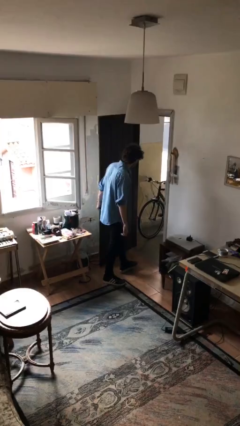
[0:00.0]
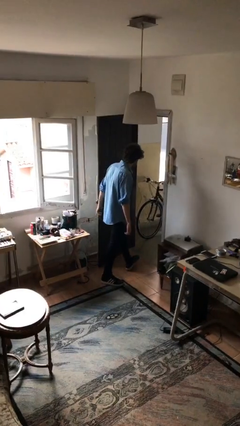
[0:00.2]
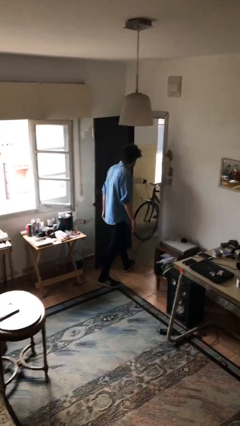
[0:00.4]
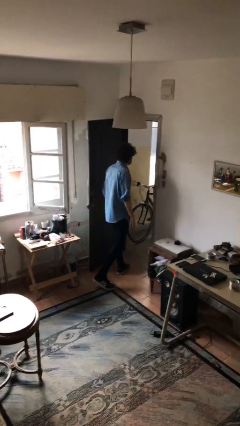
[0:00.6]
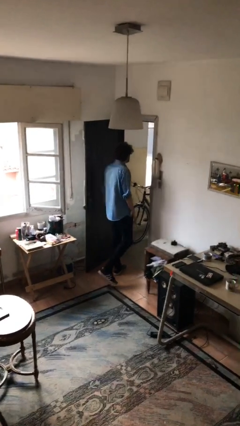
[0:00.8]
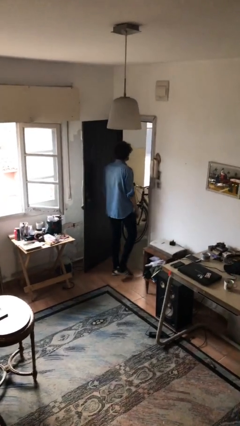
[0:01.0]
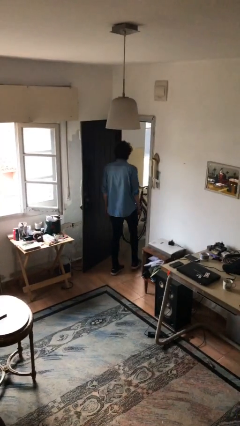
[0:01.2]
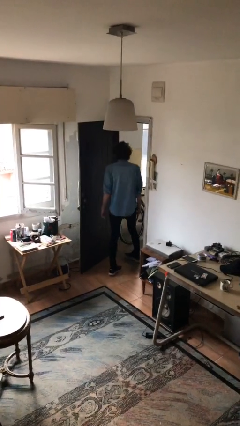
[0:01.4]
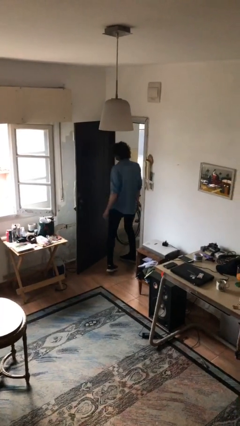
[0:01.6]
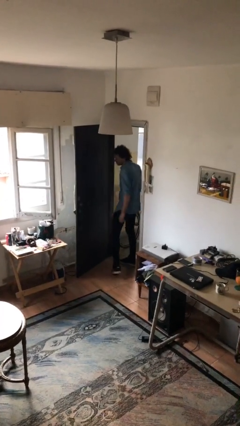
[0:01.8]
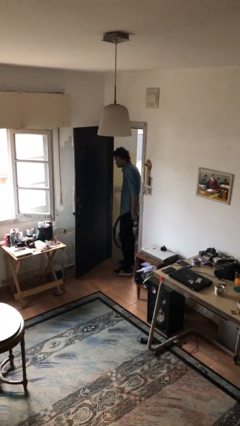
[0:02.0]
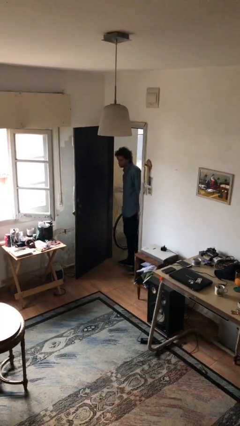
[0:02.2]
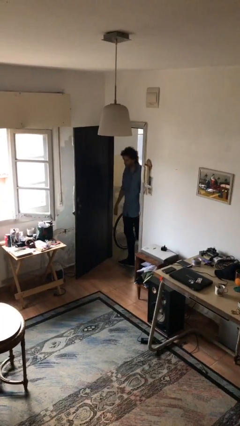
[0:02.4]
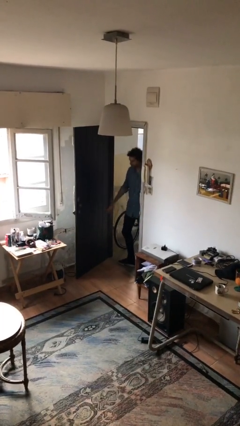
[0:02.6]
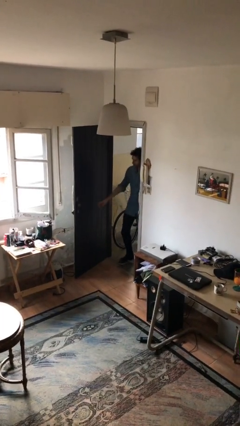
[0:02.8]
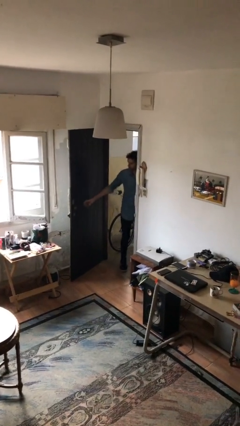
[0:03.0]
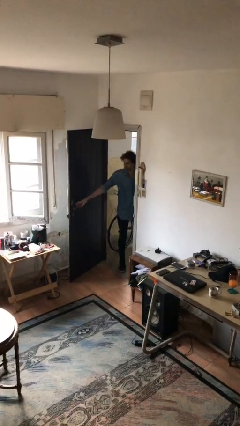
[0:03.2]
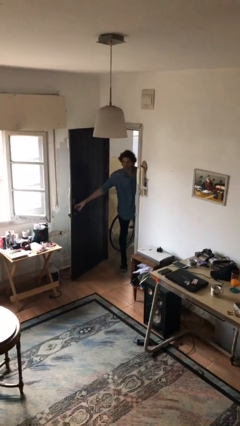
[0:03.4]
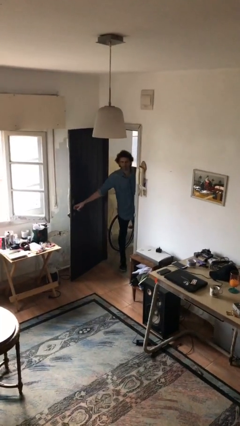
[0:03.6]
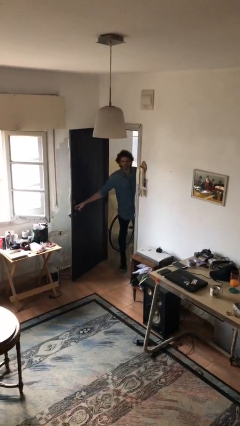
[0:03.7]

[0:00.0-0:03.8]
person exits scene through structure

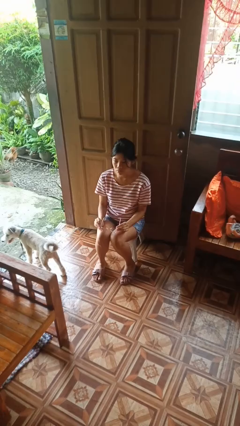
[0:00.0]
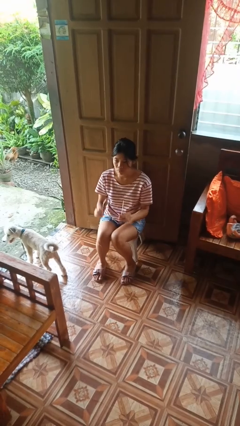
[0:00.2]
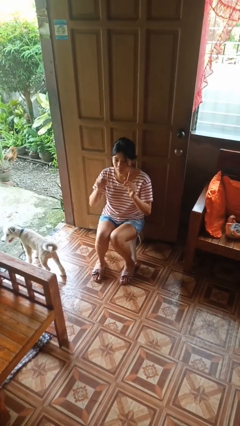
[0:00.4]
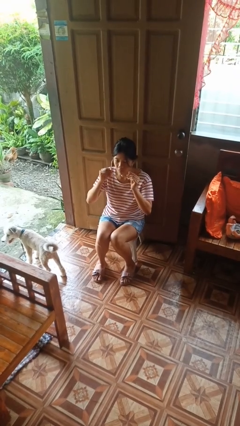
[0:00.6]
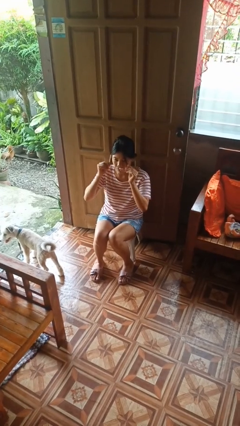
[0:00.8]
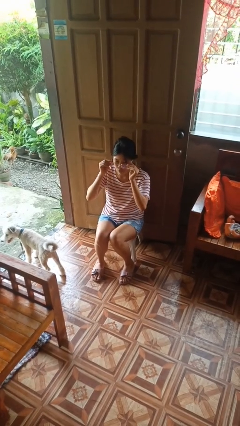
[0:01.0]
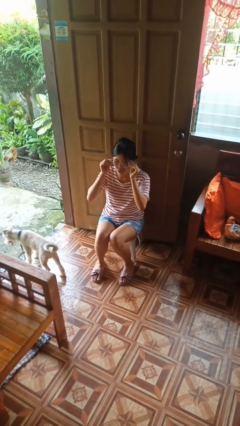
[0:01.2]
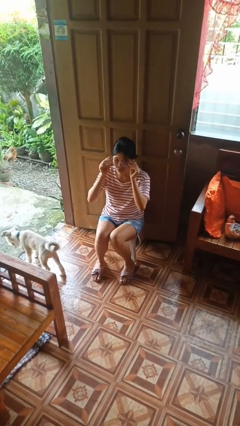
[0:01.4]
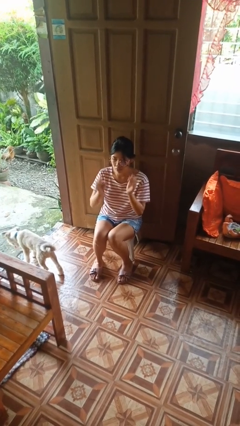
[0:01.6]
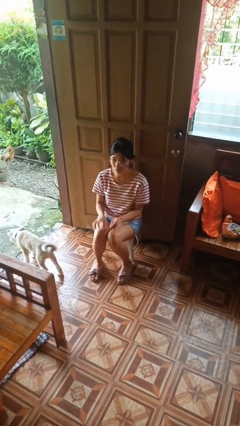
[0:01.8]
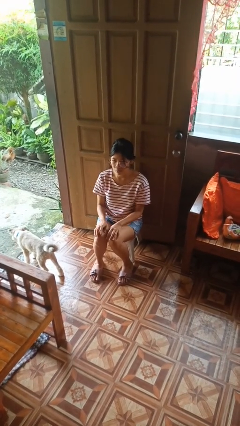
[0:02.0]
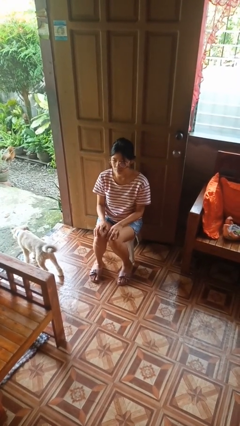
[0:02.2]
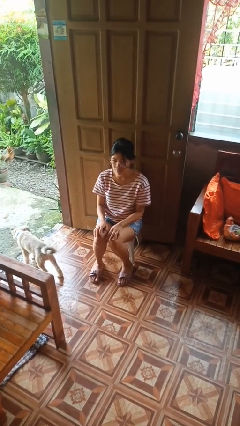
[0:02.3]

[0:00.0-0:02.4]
person puts on glasses

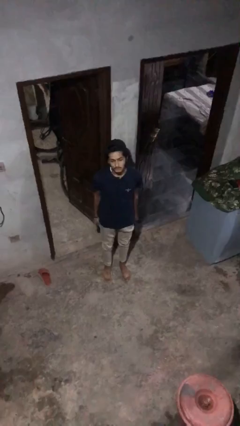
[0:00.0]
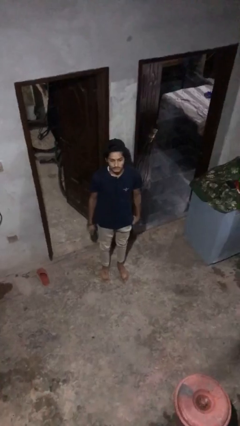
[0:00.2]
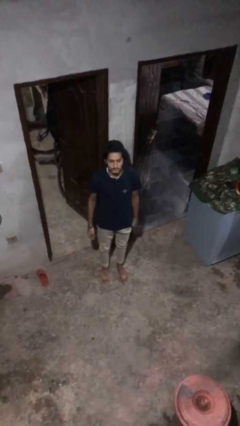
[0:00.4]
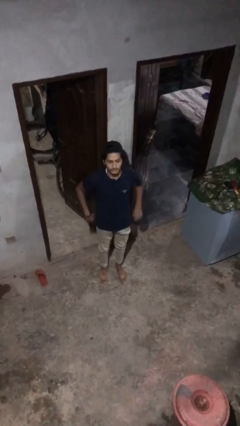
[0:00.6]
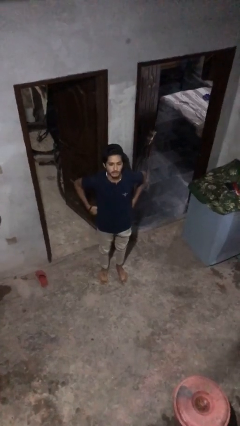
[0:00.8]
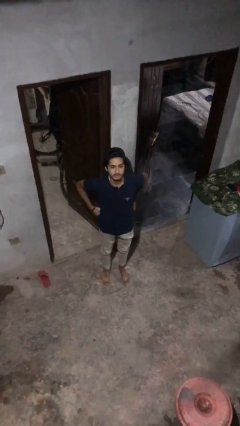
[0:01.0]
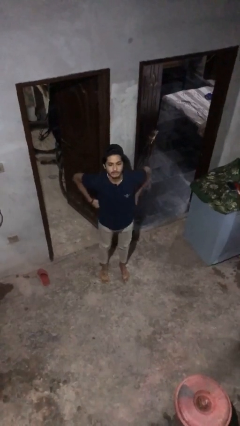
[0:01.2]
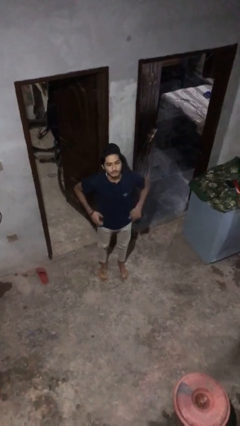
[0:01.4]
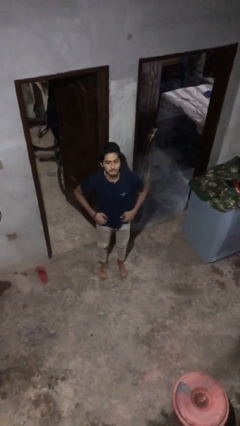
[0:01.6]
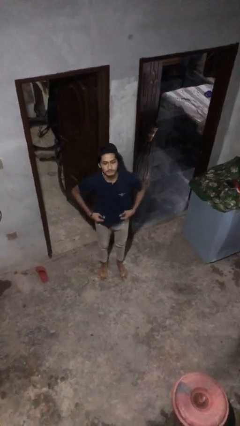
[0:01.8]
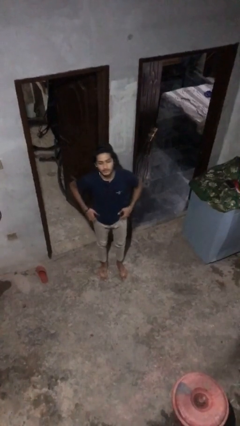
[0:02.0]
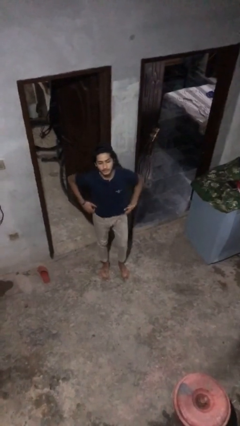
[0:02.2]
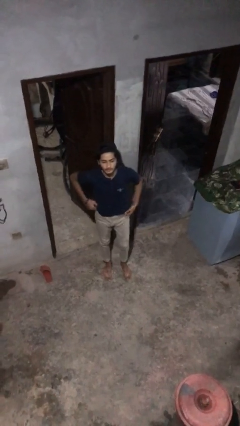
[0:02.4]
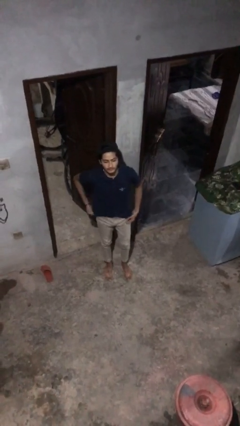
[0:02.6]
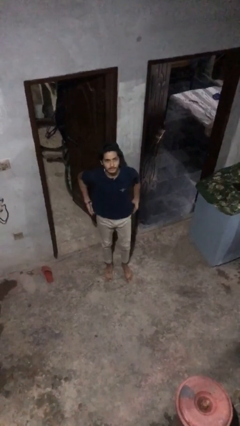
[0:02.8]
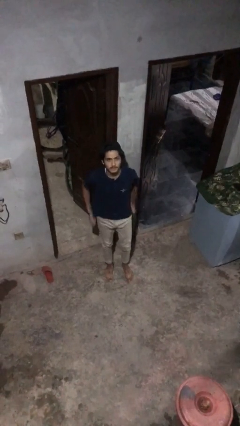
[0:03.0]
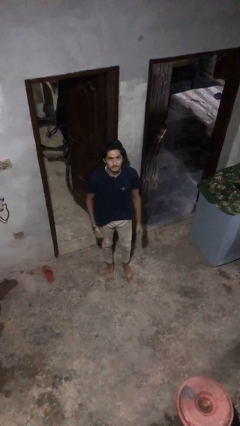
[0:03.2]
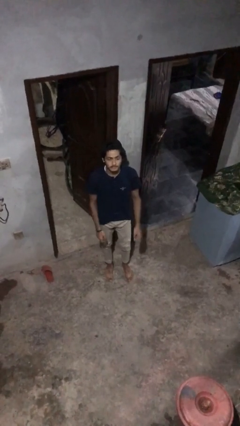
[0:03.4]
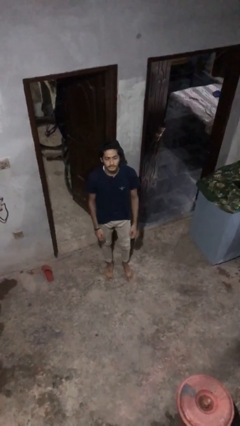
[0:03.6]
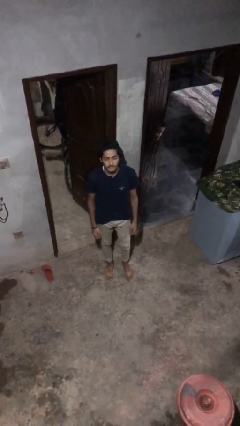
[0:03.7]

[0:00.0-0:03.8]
person hikes up pants

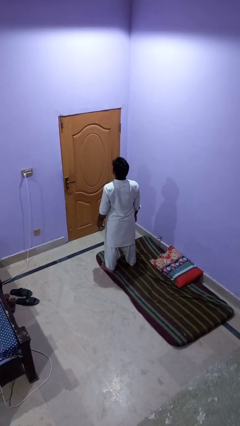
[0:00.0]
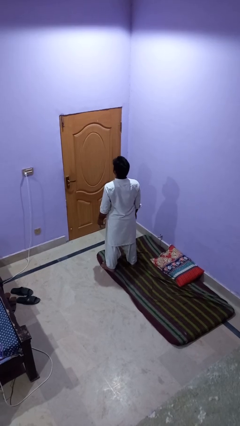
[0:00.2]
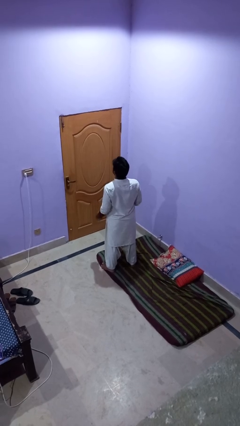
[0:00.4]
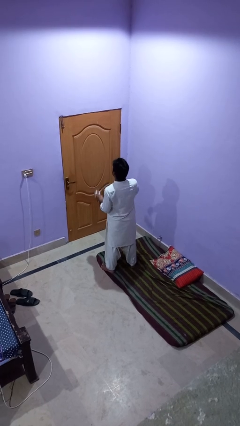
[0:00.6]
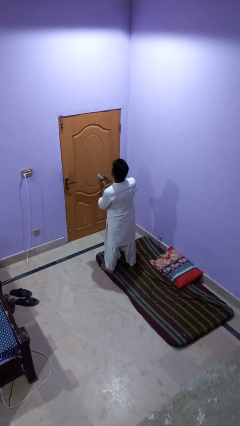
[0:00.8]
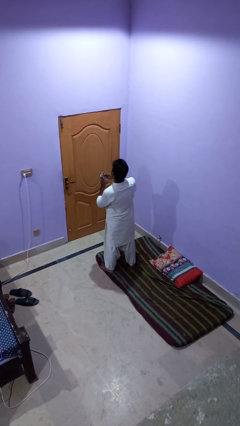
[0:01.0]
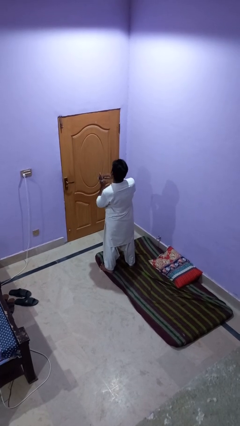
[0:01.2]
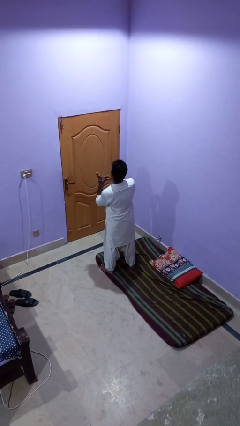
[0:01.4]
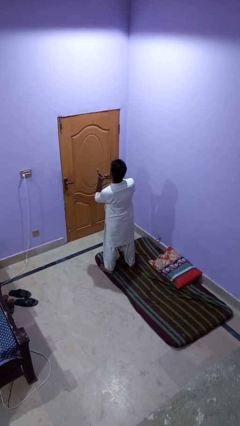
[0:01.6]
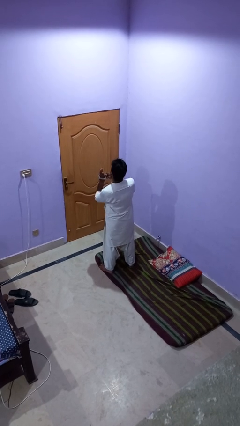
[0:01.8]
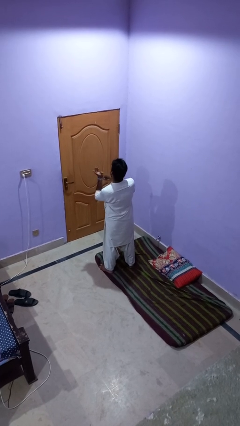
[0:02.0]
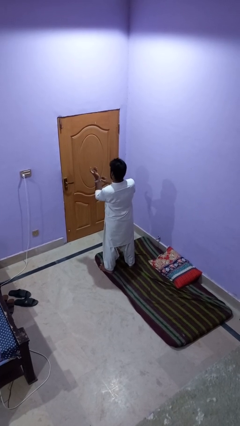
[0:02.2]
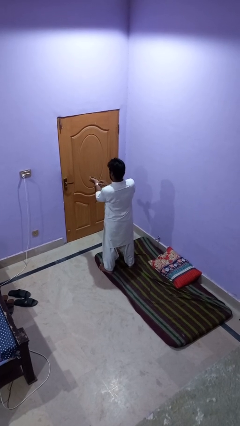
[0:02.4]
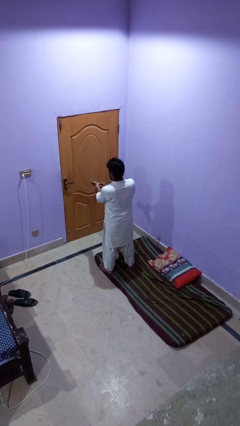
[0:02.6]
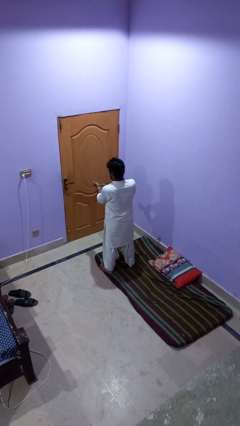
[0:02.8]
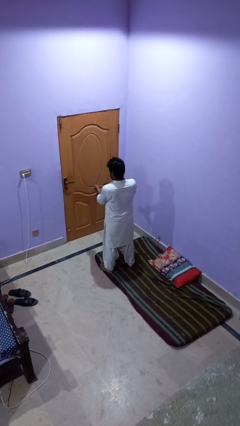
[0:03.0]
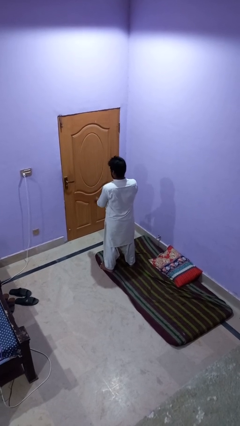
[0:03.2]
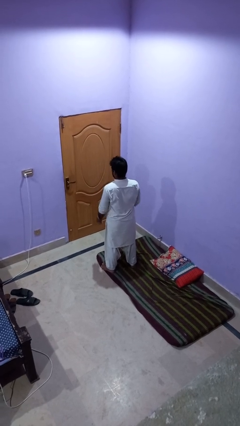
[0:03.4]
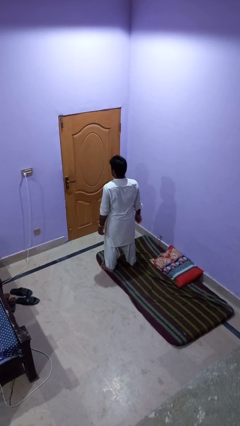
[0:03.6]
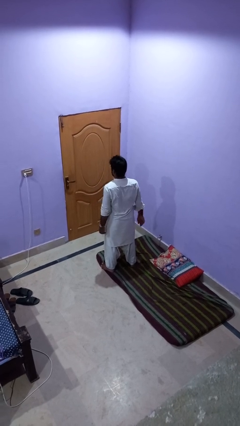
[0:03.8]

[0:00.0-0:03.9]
person puts on wristwatch

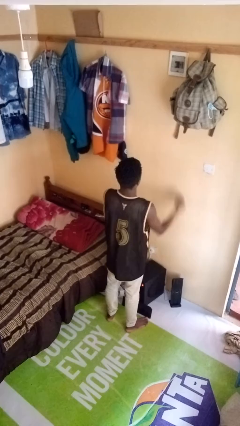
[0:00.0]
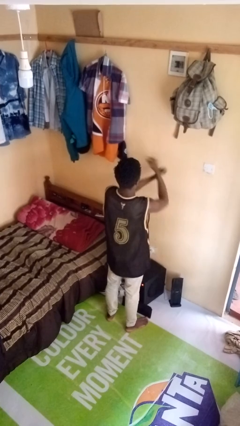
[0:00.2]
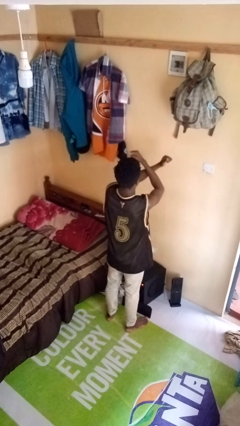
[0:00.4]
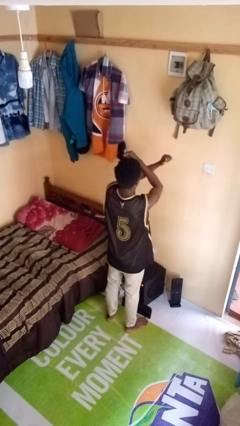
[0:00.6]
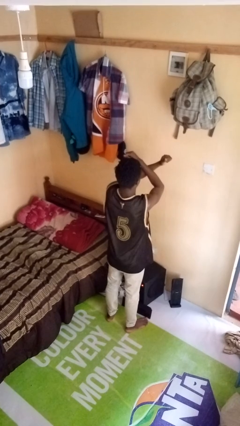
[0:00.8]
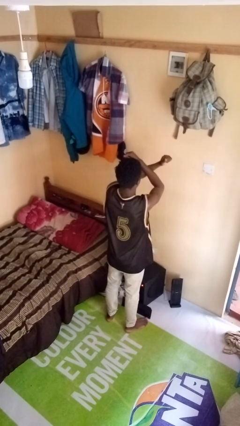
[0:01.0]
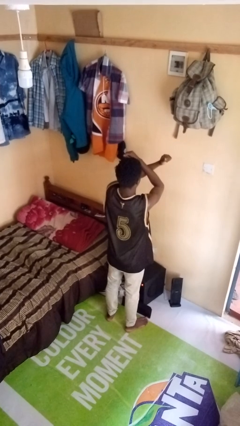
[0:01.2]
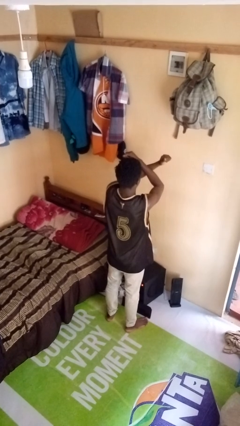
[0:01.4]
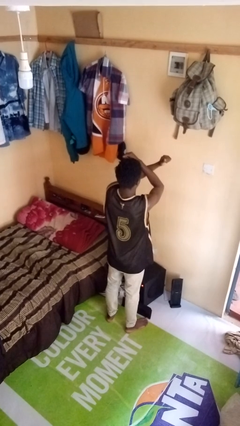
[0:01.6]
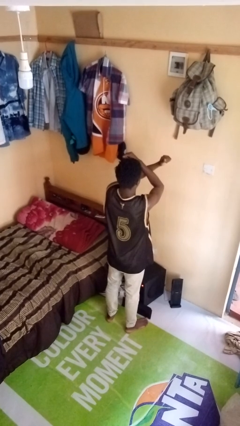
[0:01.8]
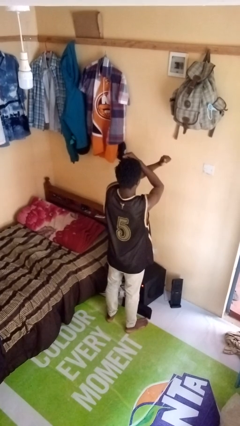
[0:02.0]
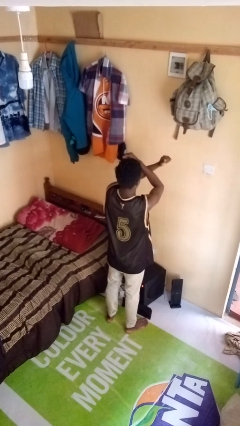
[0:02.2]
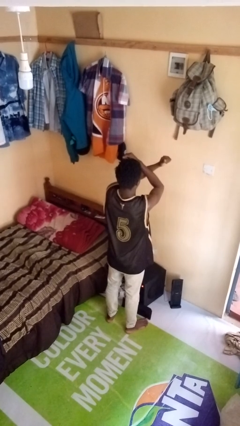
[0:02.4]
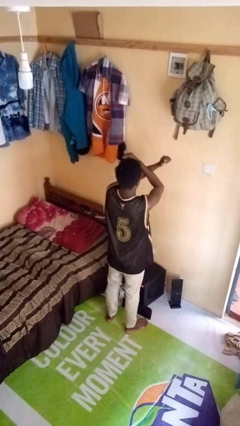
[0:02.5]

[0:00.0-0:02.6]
person gestures arms x

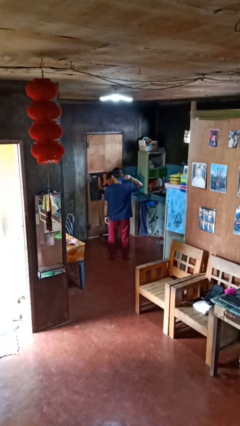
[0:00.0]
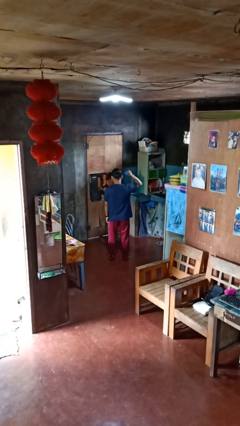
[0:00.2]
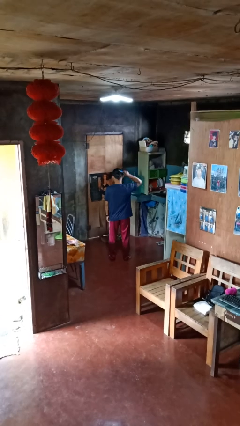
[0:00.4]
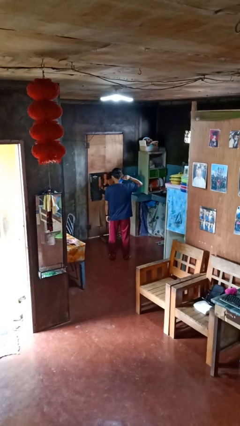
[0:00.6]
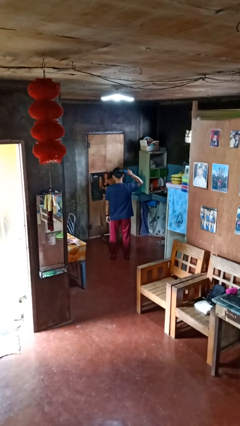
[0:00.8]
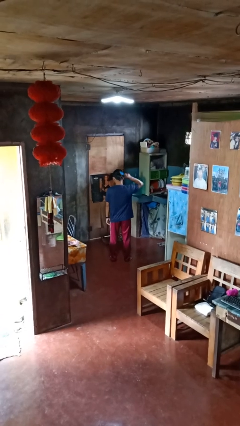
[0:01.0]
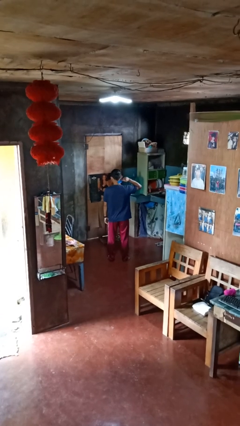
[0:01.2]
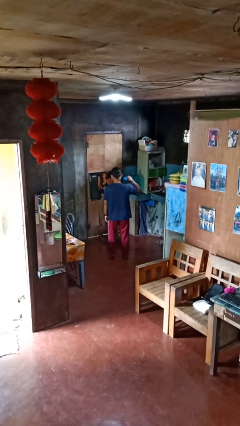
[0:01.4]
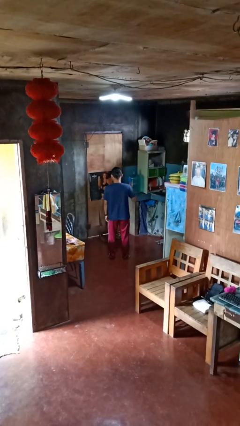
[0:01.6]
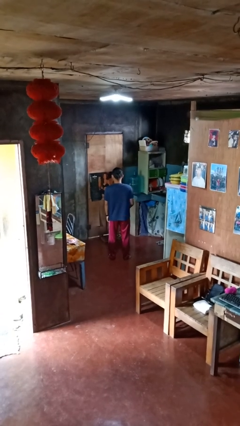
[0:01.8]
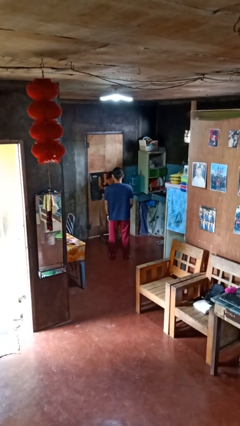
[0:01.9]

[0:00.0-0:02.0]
person brushes hair
